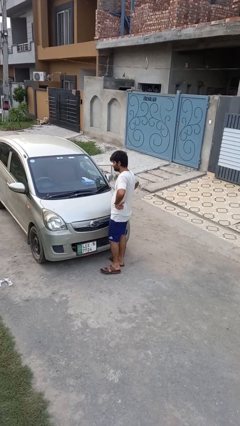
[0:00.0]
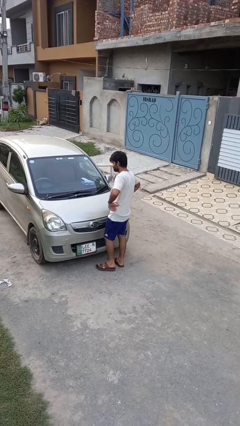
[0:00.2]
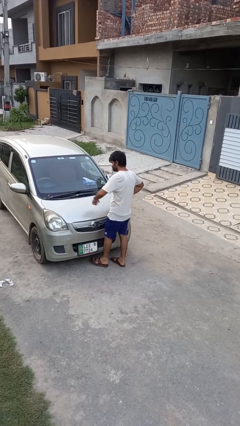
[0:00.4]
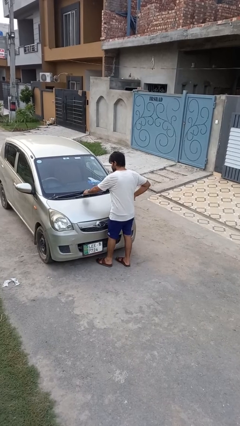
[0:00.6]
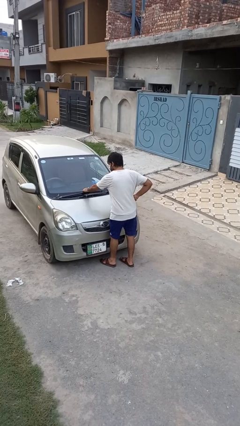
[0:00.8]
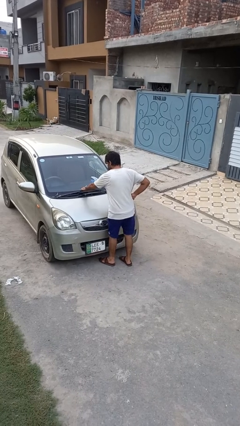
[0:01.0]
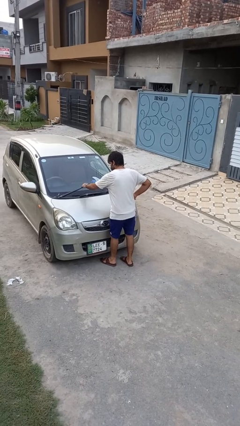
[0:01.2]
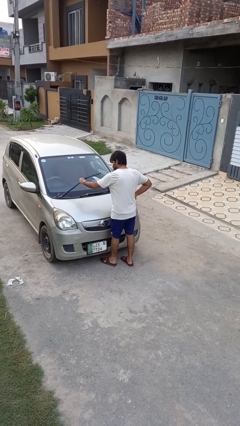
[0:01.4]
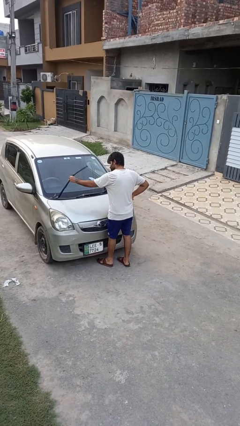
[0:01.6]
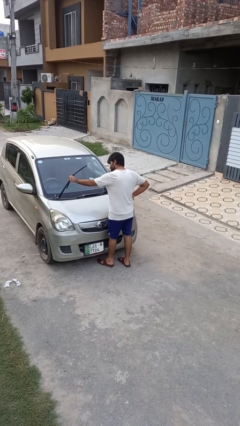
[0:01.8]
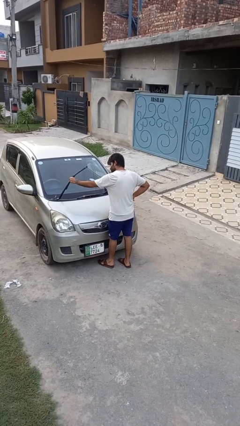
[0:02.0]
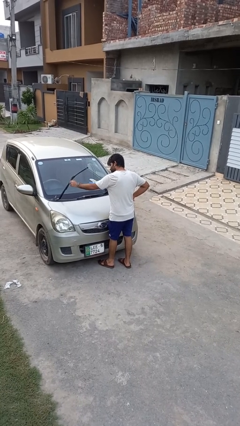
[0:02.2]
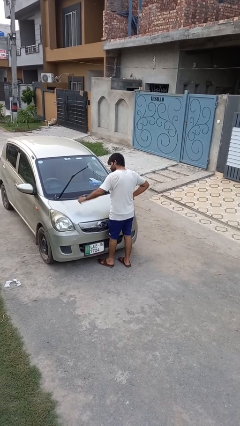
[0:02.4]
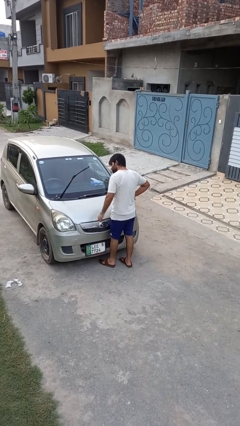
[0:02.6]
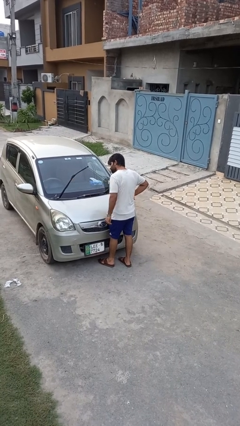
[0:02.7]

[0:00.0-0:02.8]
person flips up car wipers

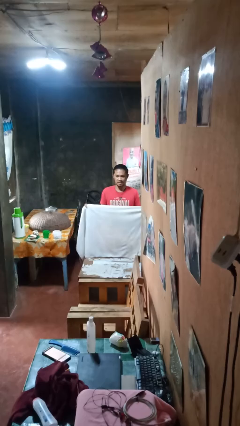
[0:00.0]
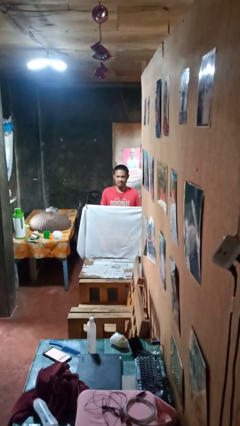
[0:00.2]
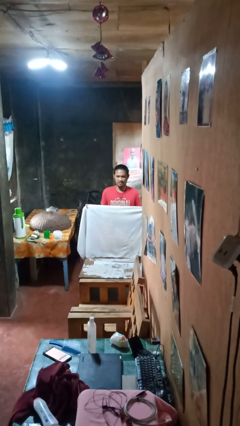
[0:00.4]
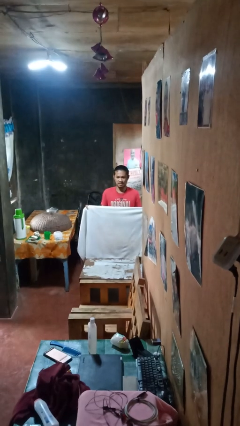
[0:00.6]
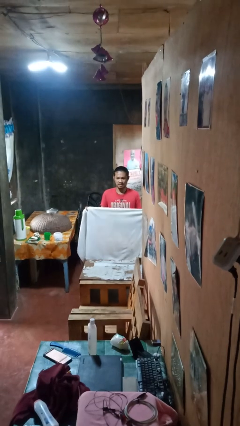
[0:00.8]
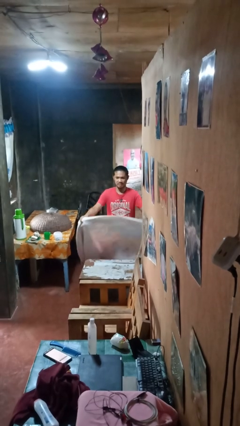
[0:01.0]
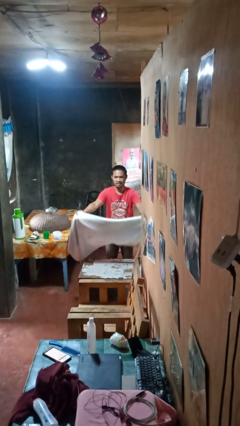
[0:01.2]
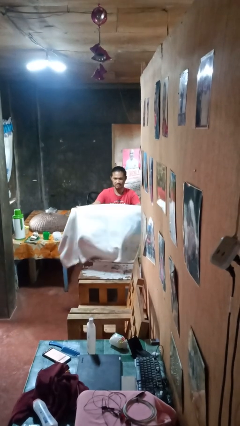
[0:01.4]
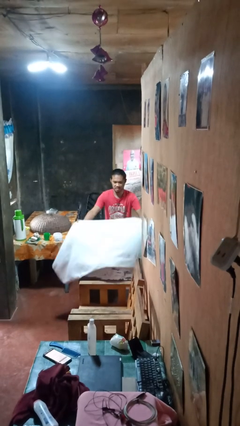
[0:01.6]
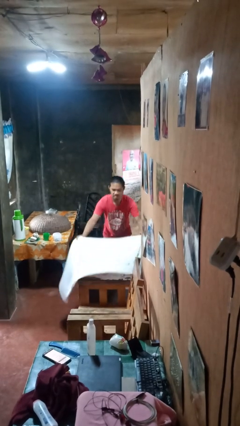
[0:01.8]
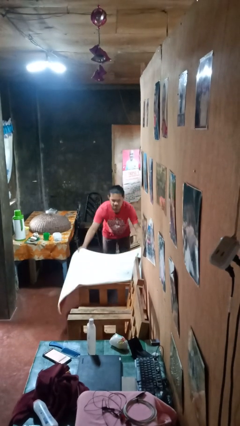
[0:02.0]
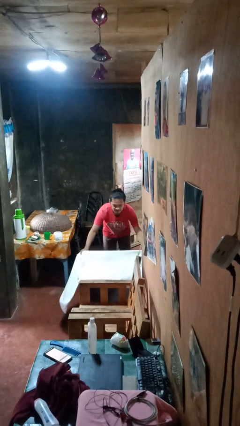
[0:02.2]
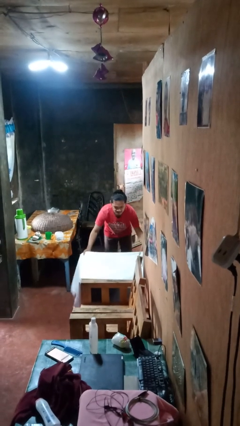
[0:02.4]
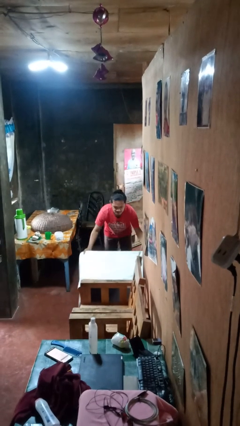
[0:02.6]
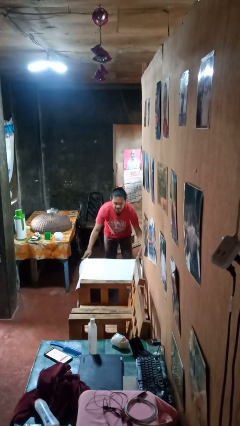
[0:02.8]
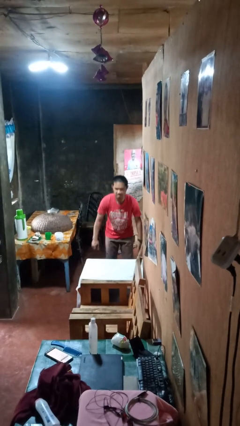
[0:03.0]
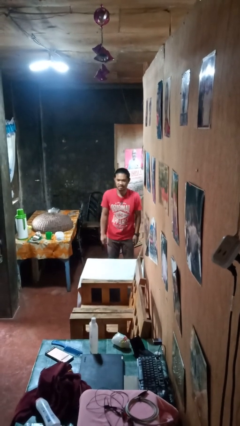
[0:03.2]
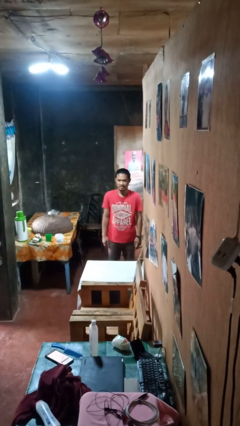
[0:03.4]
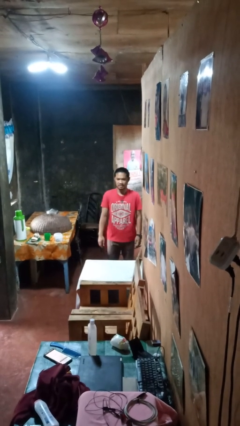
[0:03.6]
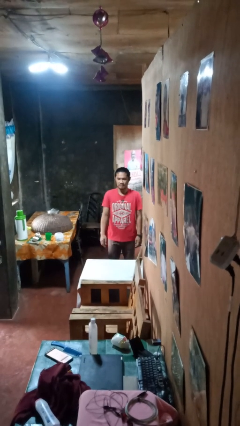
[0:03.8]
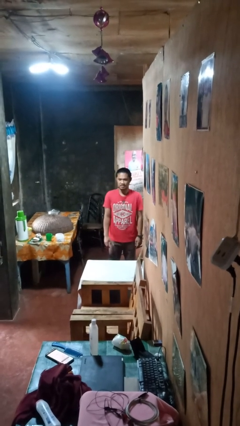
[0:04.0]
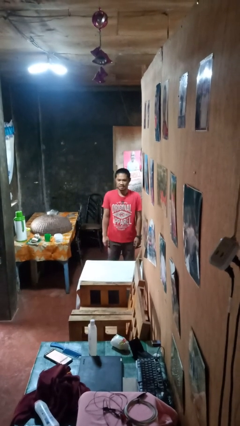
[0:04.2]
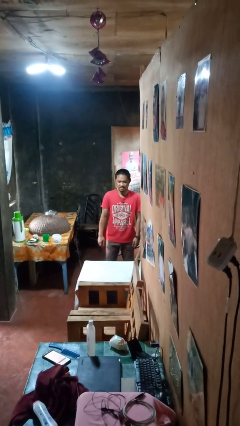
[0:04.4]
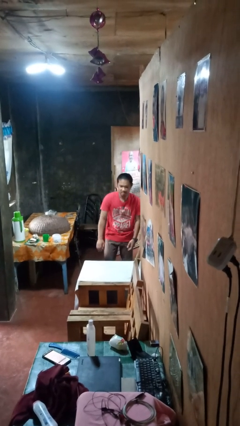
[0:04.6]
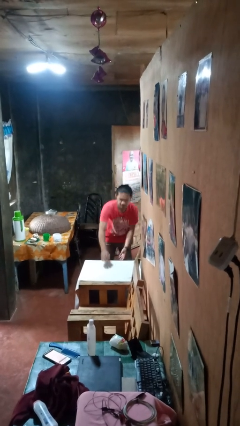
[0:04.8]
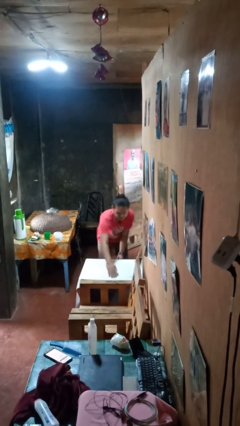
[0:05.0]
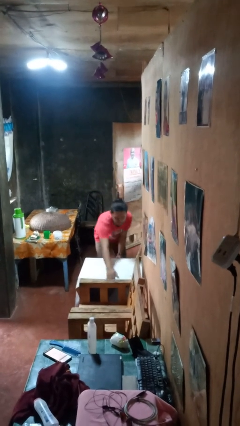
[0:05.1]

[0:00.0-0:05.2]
person spreads tablecloth

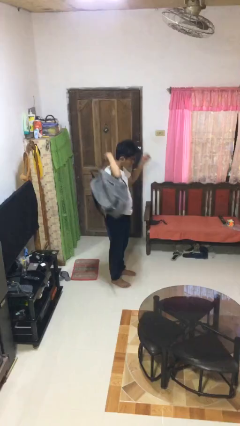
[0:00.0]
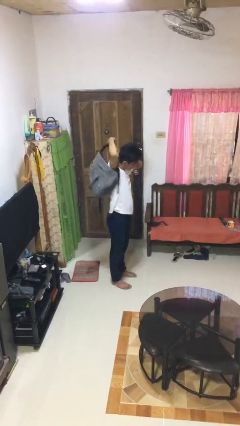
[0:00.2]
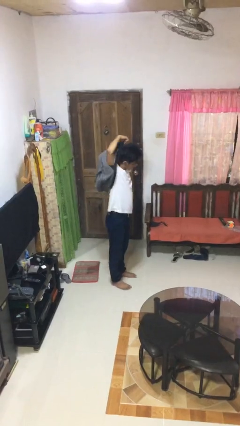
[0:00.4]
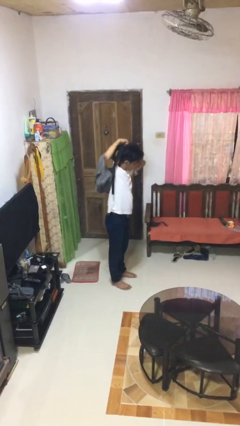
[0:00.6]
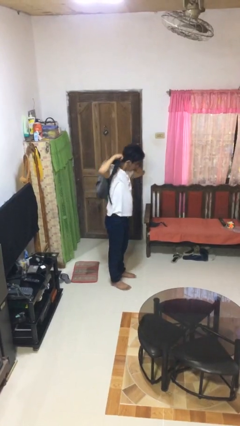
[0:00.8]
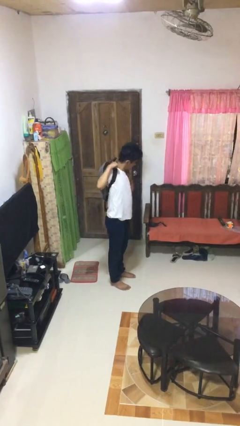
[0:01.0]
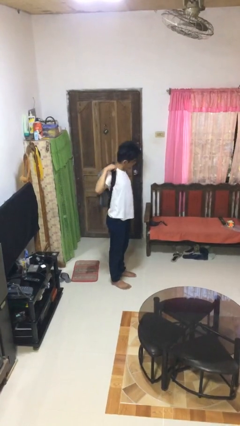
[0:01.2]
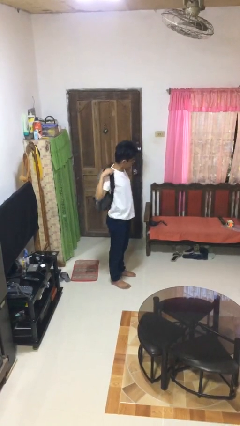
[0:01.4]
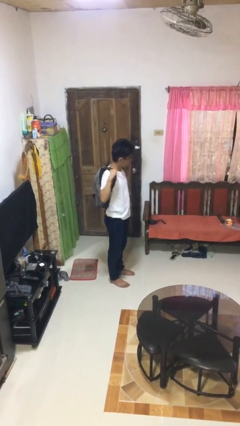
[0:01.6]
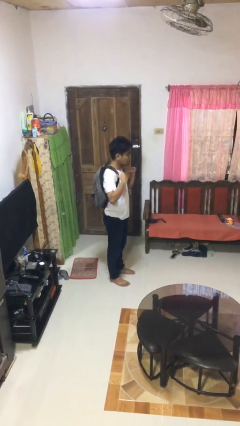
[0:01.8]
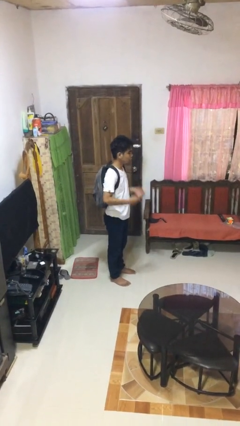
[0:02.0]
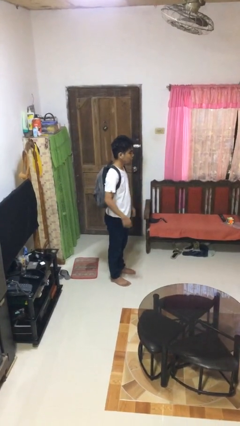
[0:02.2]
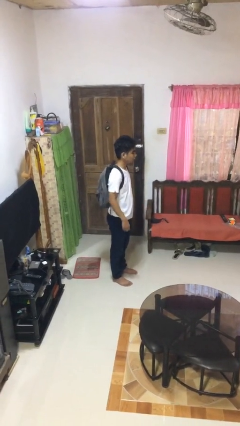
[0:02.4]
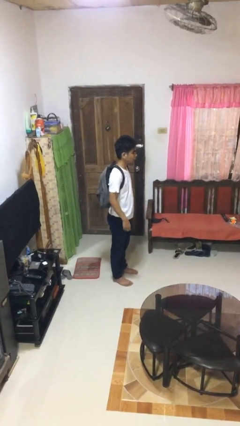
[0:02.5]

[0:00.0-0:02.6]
person puts on backpack

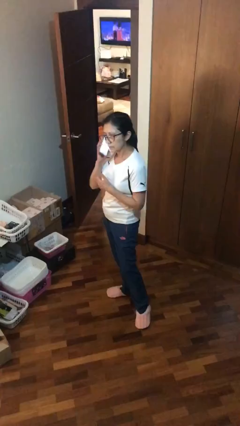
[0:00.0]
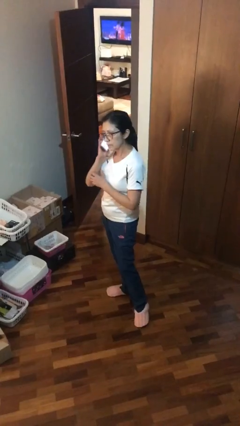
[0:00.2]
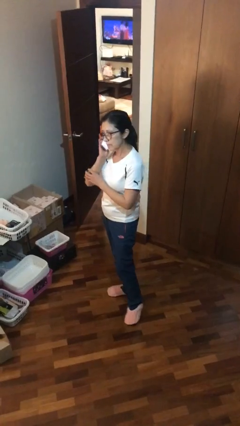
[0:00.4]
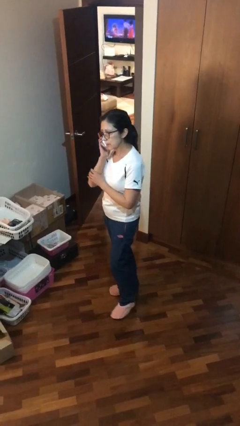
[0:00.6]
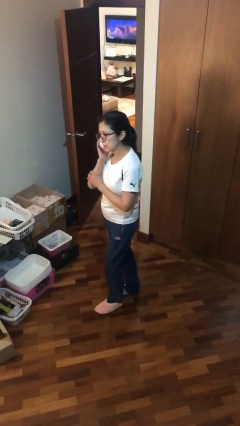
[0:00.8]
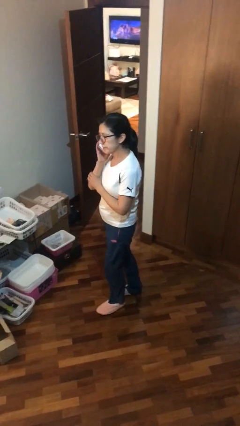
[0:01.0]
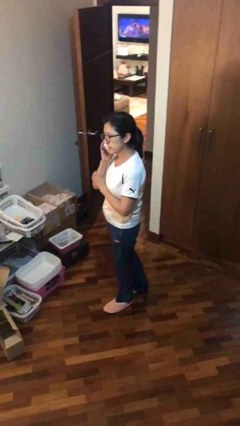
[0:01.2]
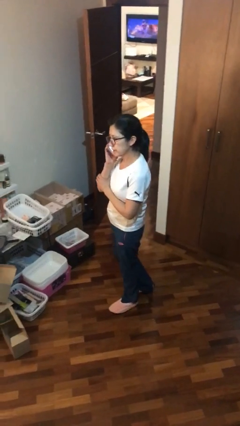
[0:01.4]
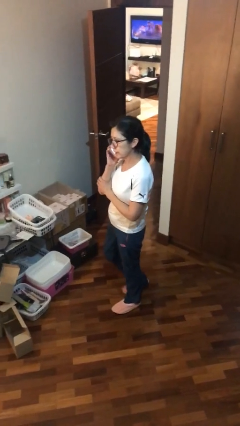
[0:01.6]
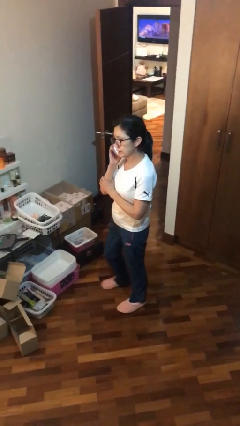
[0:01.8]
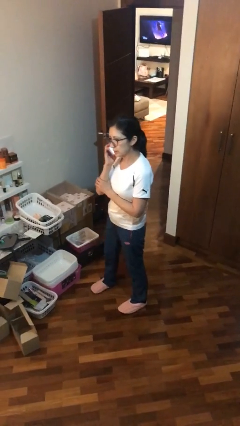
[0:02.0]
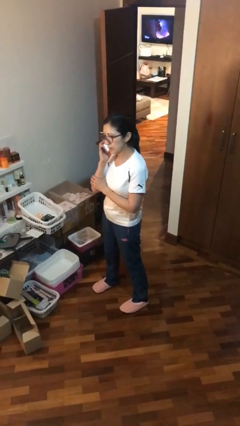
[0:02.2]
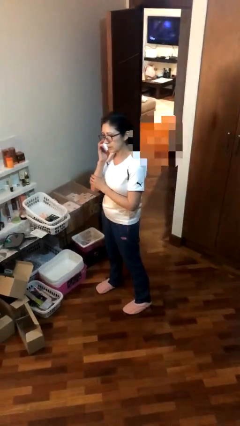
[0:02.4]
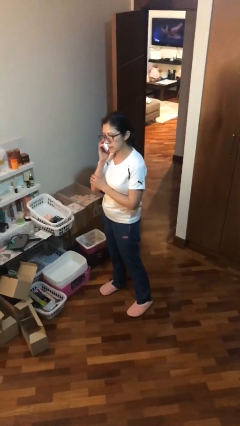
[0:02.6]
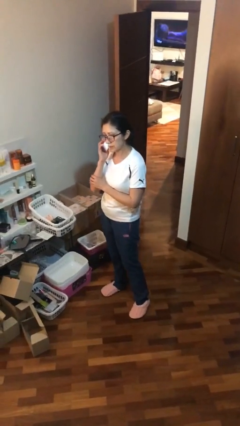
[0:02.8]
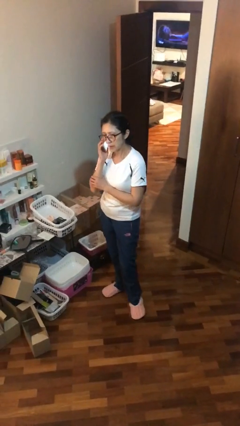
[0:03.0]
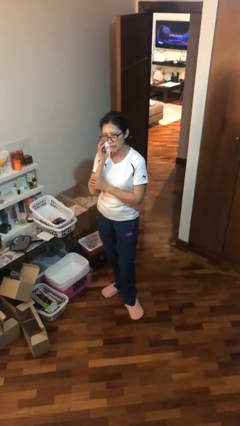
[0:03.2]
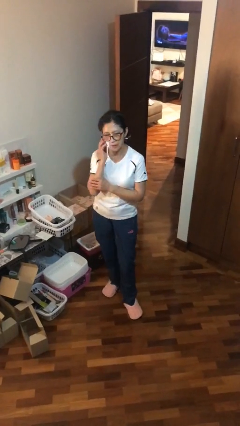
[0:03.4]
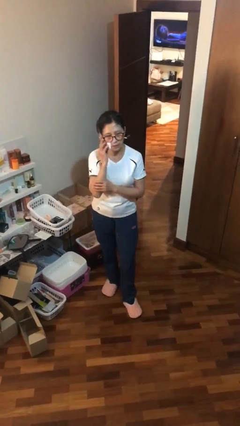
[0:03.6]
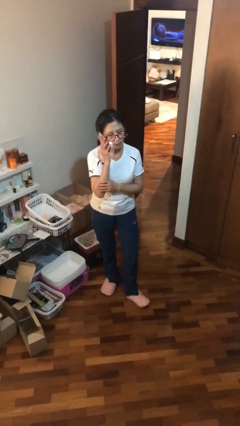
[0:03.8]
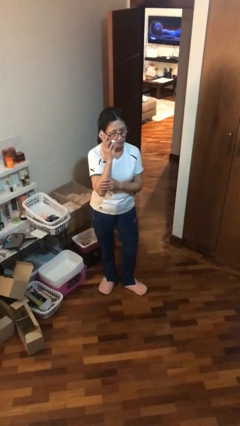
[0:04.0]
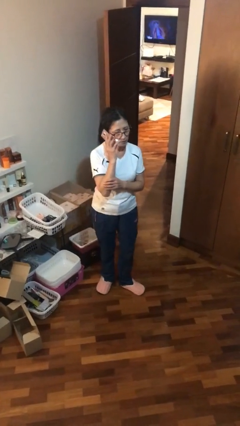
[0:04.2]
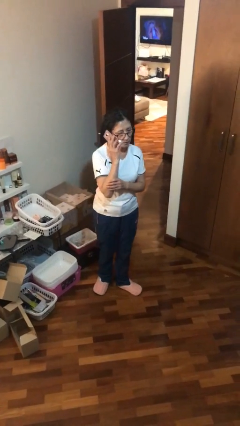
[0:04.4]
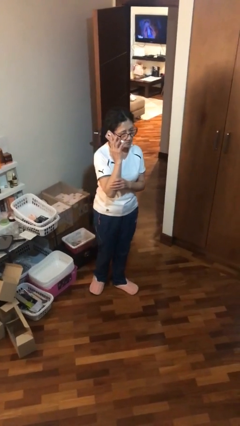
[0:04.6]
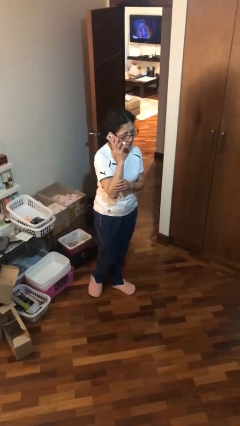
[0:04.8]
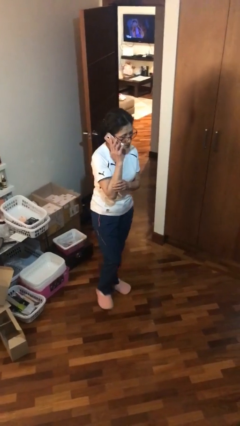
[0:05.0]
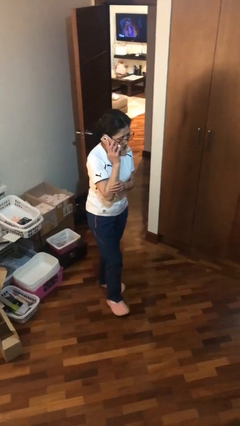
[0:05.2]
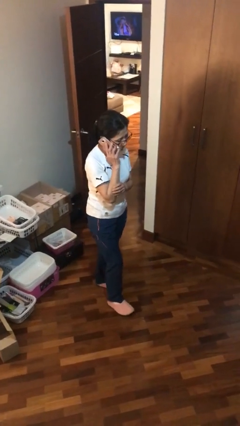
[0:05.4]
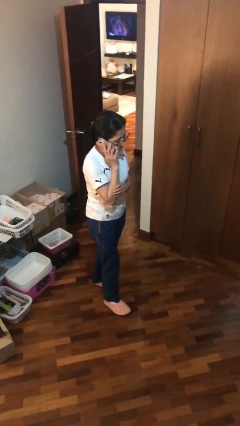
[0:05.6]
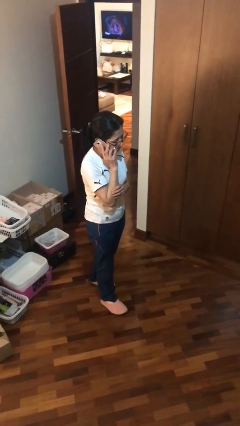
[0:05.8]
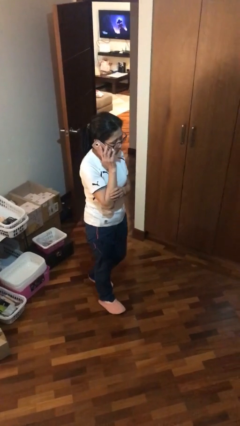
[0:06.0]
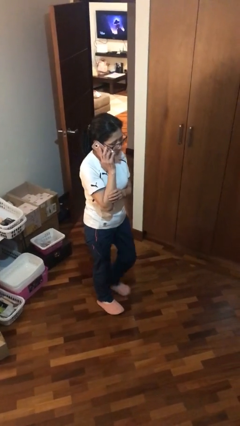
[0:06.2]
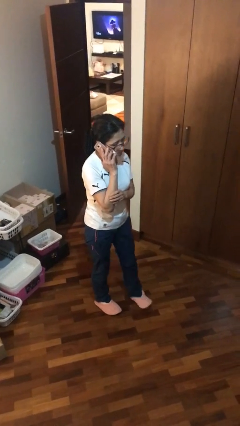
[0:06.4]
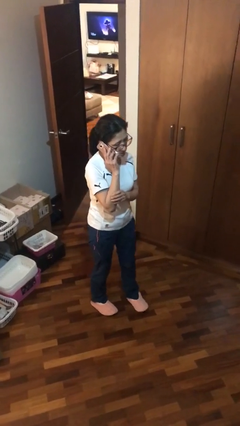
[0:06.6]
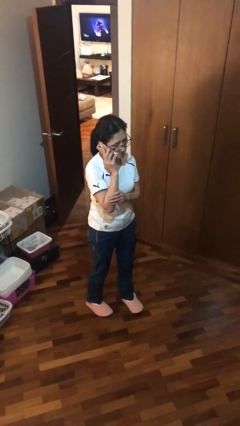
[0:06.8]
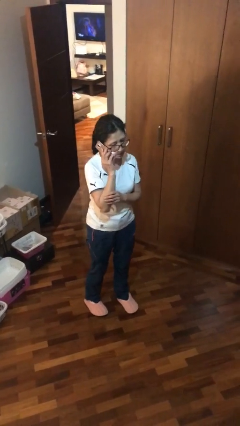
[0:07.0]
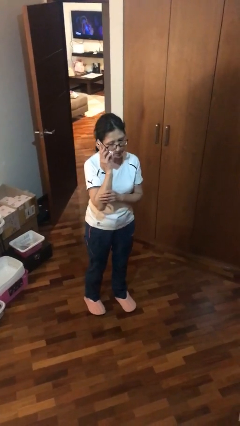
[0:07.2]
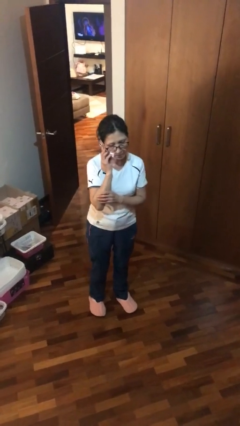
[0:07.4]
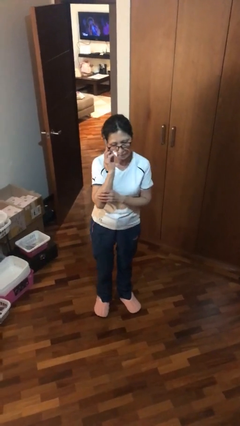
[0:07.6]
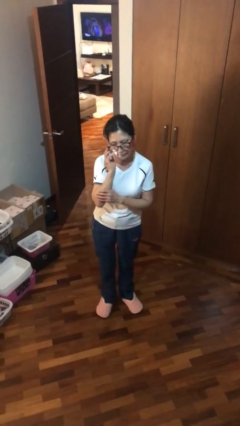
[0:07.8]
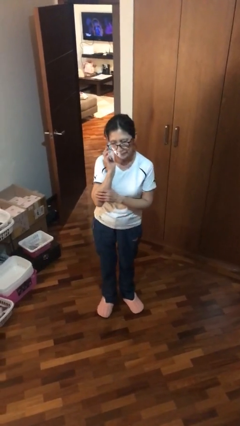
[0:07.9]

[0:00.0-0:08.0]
person talks on phone
